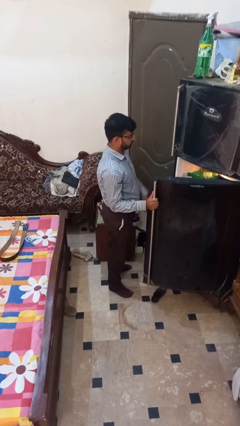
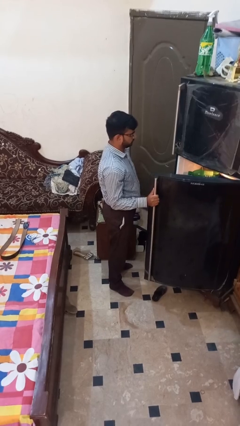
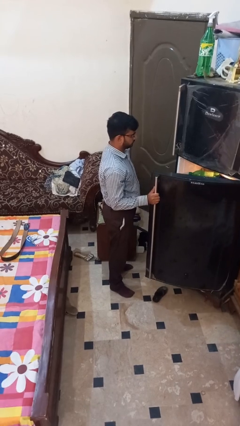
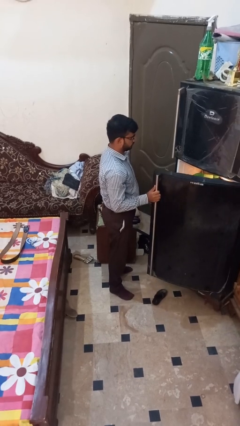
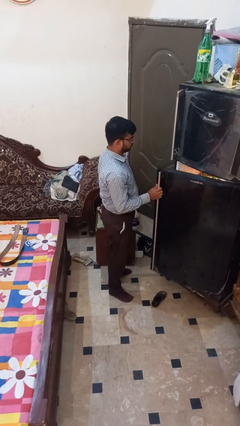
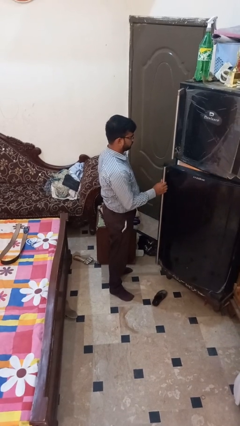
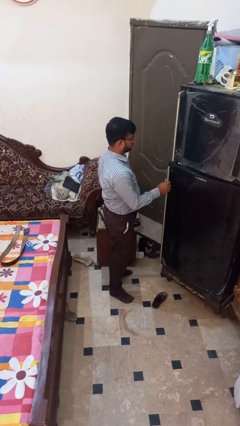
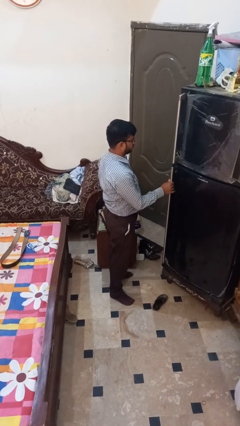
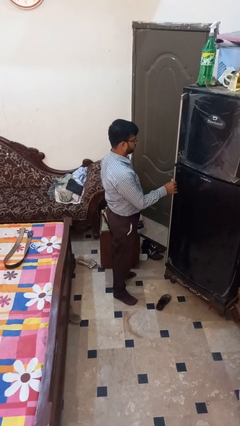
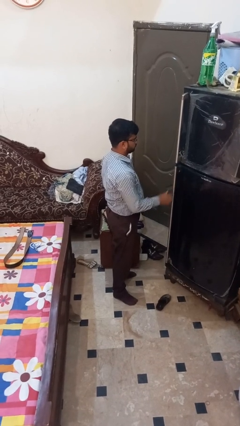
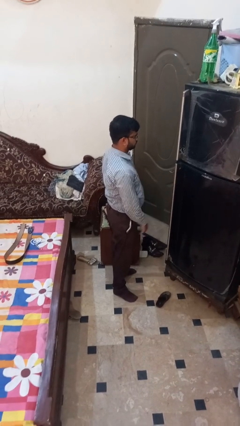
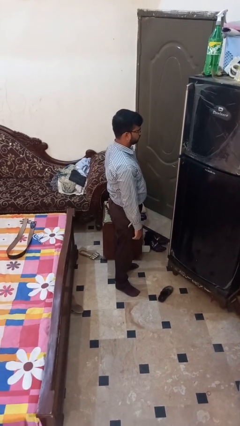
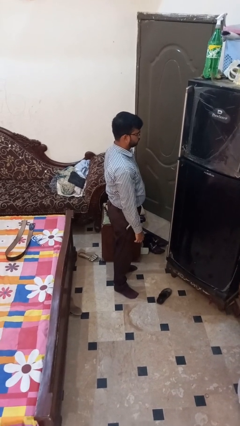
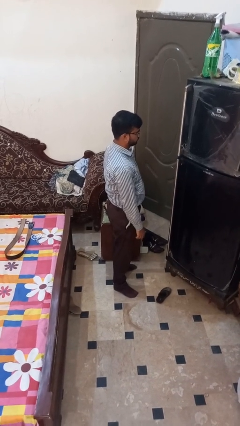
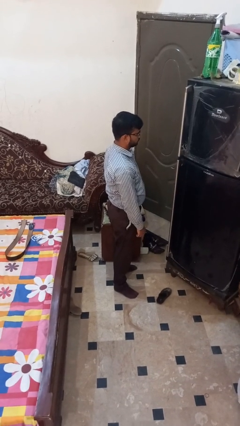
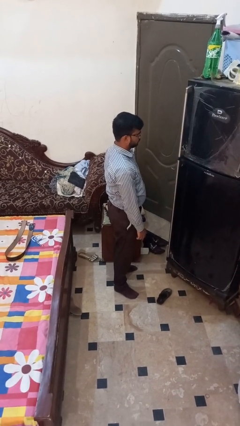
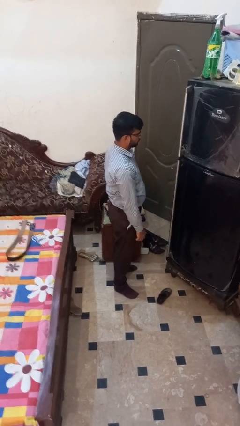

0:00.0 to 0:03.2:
person closes refrigerator

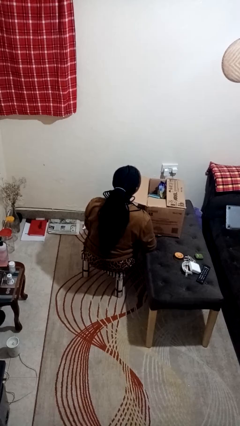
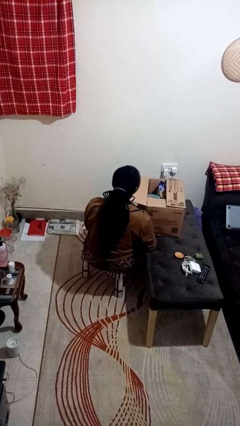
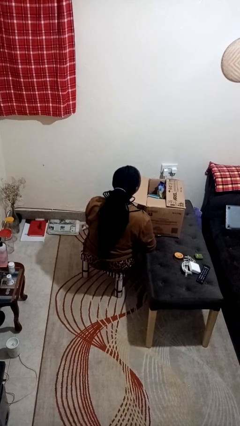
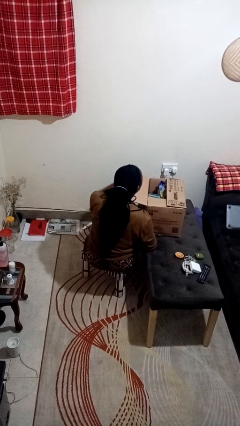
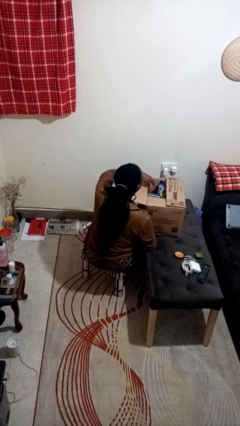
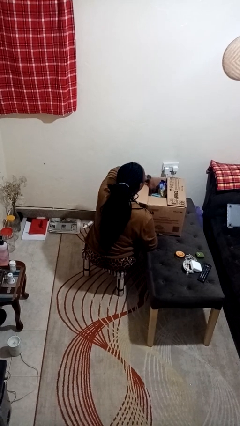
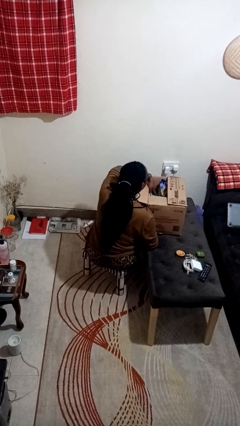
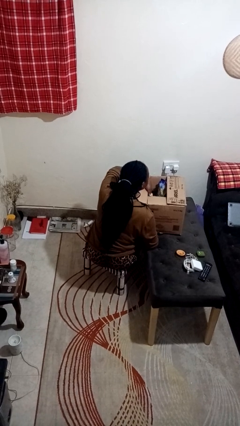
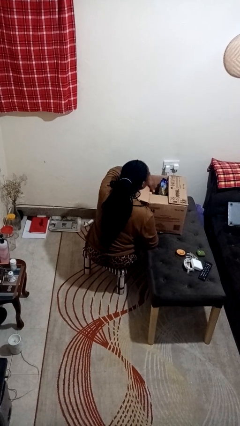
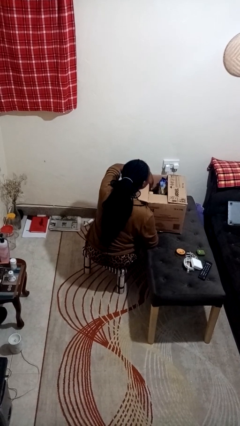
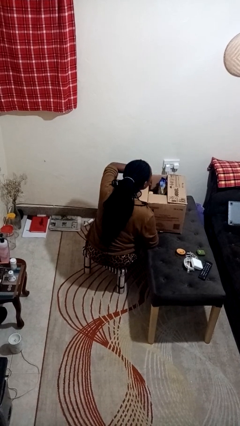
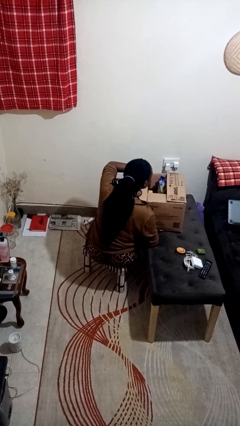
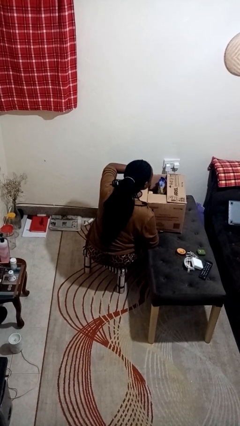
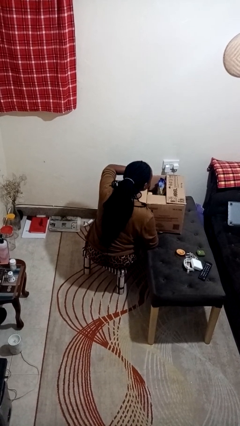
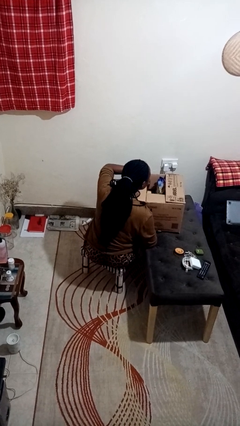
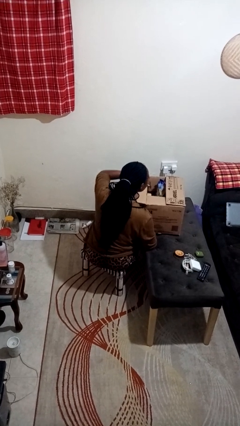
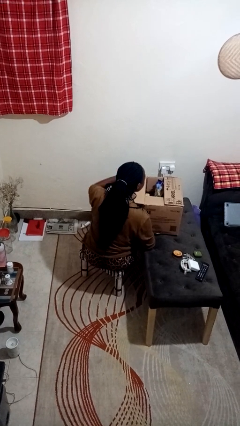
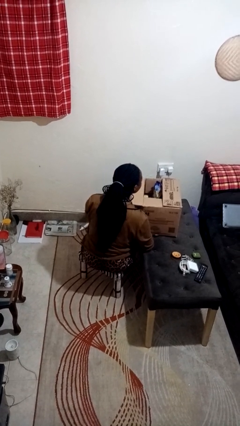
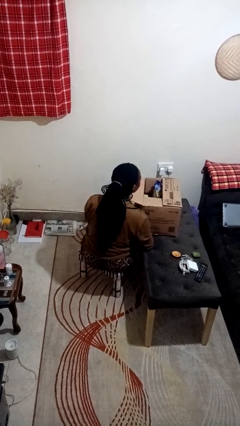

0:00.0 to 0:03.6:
person searches in box

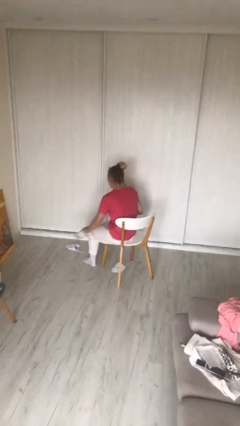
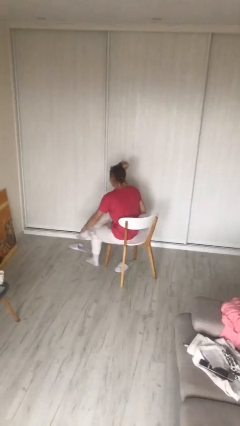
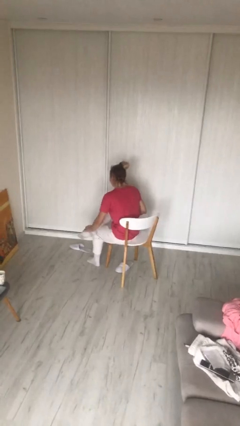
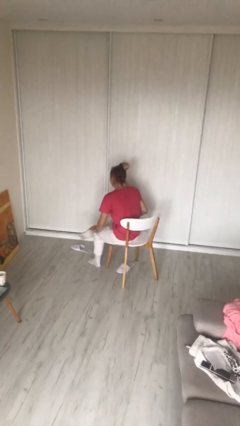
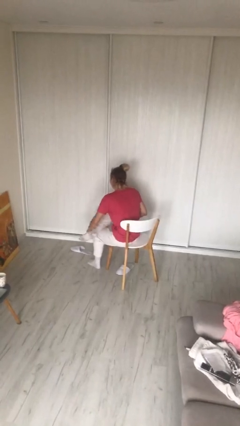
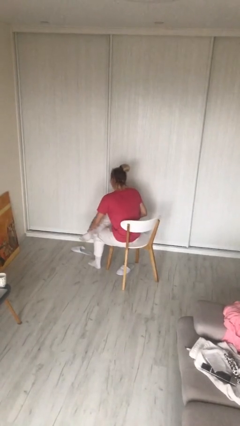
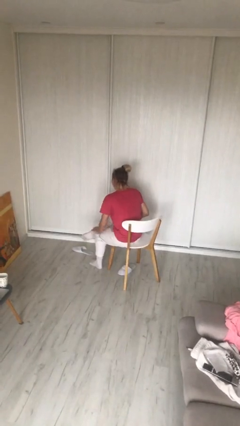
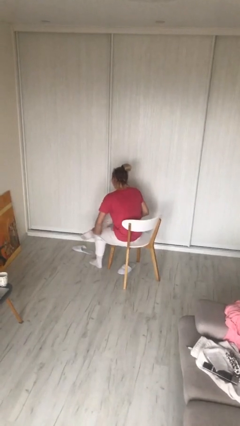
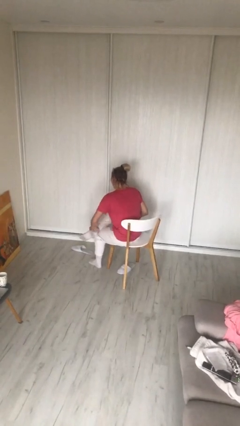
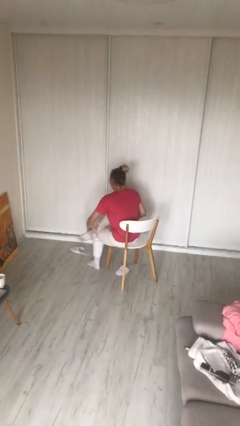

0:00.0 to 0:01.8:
person rubs foot

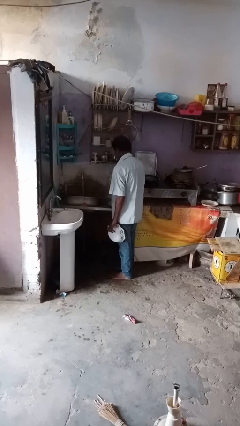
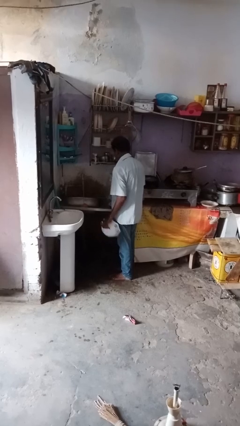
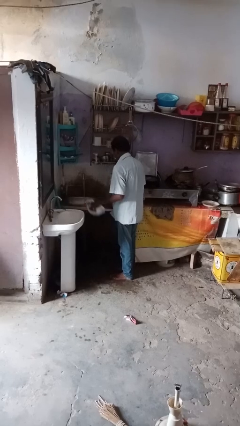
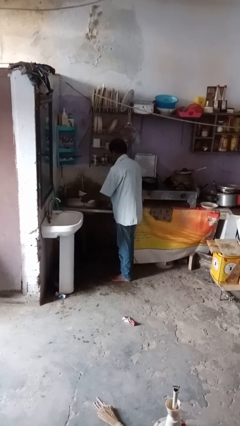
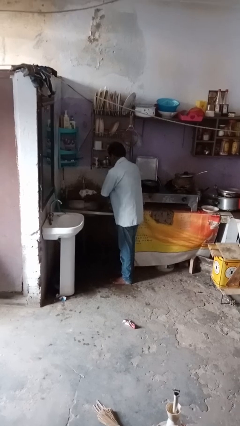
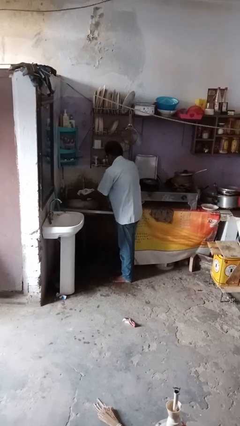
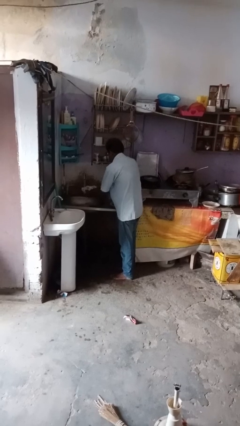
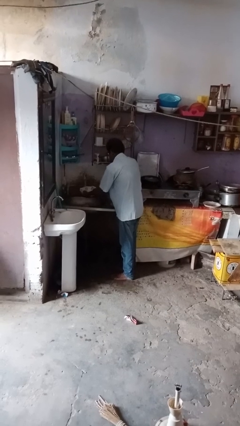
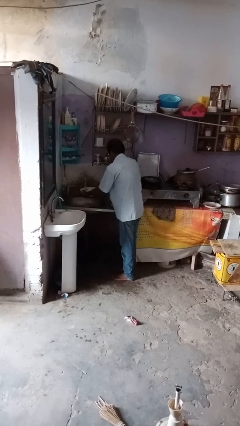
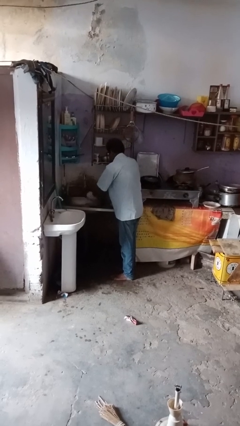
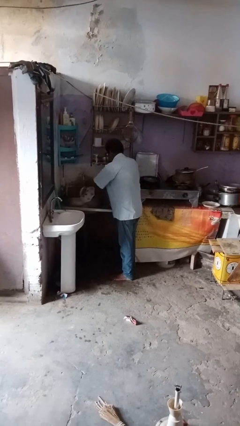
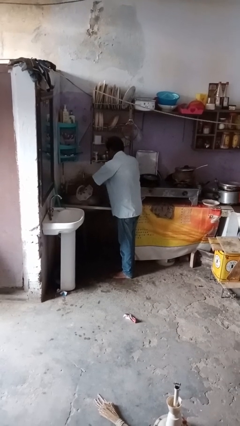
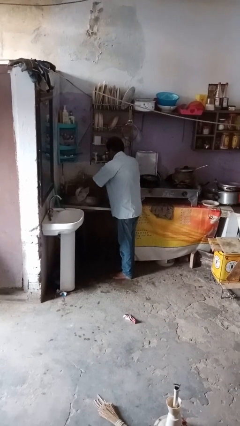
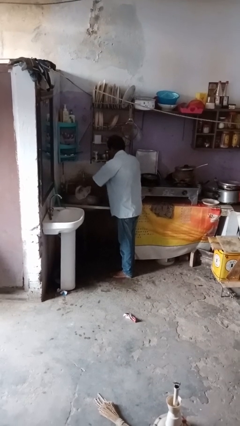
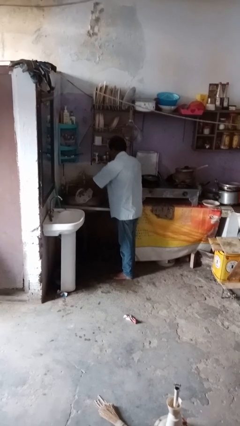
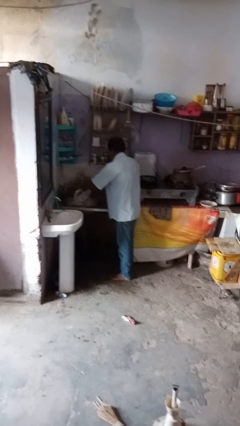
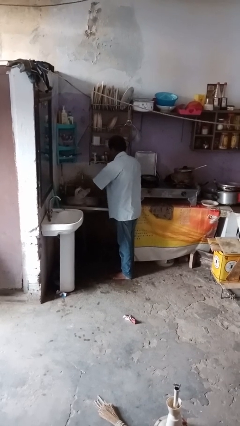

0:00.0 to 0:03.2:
person washes dish

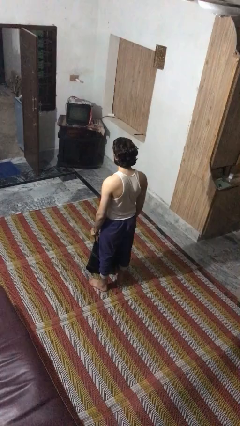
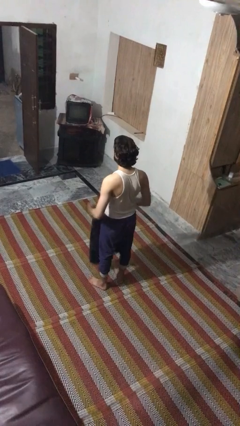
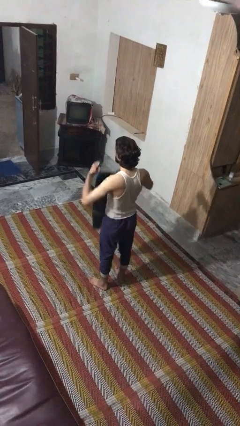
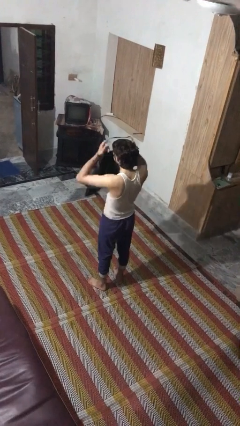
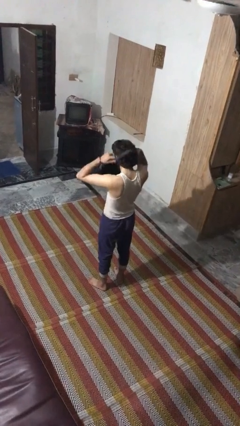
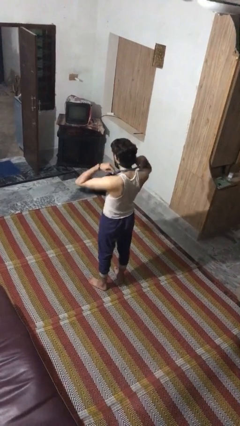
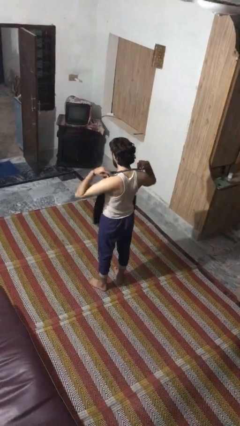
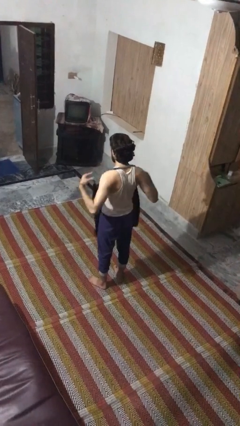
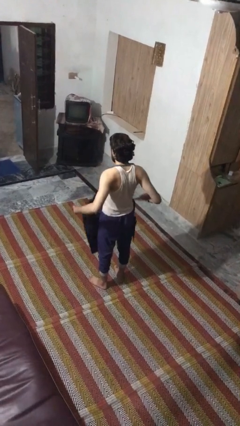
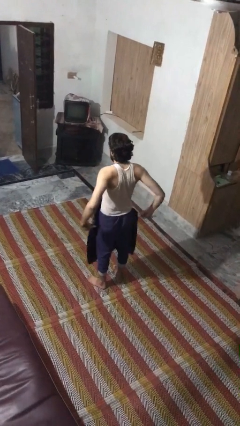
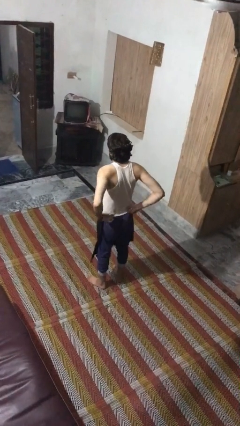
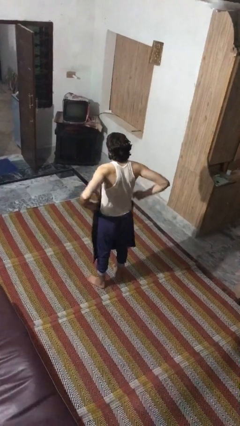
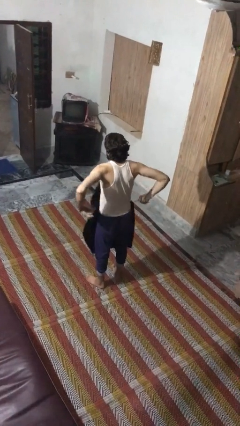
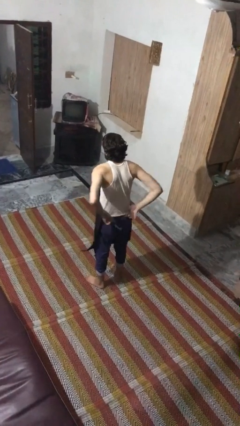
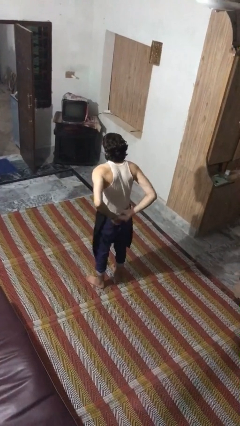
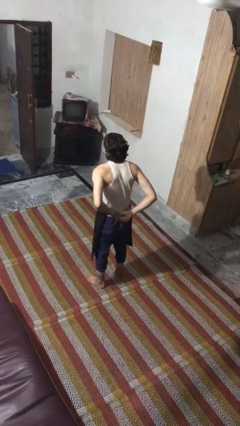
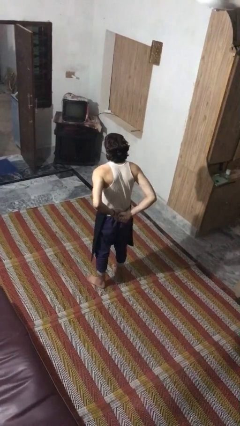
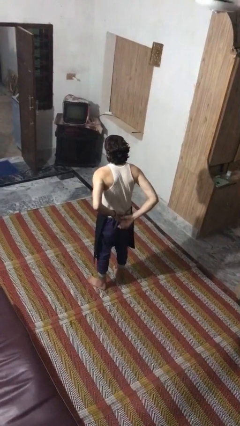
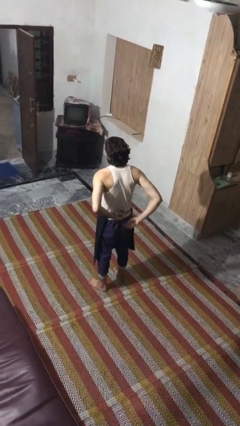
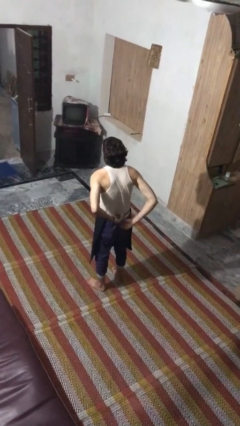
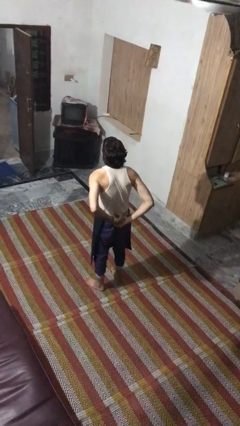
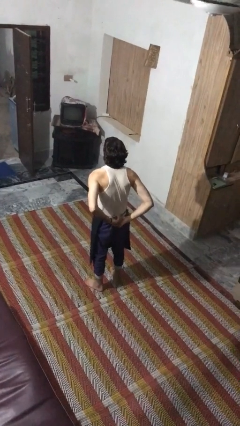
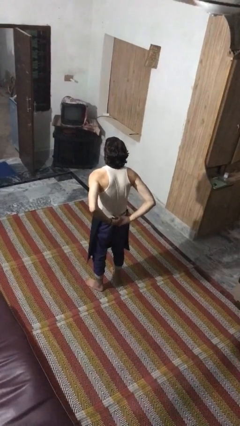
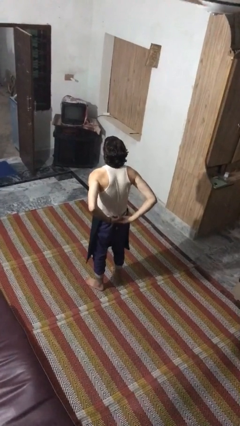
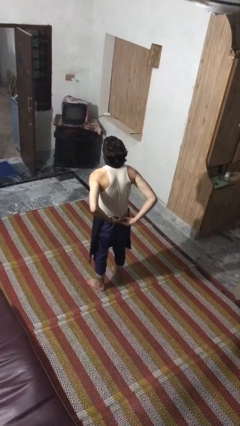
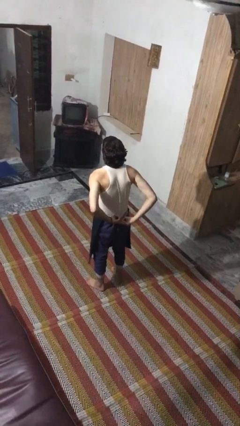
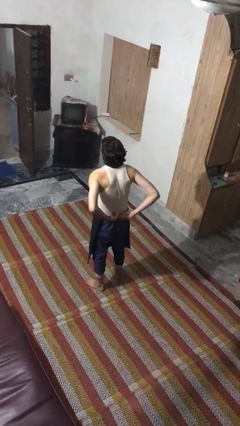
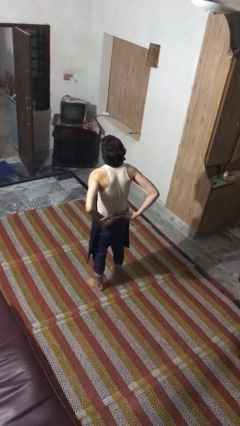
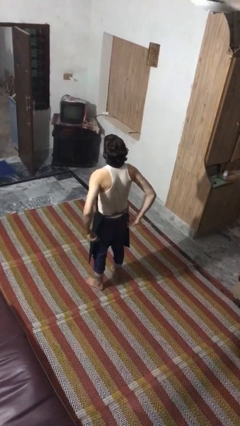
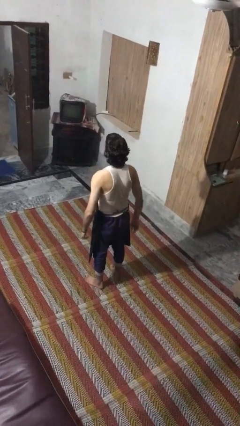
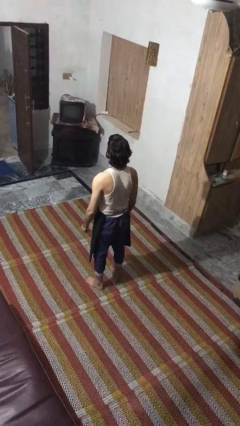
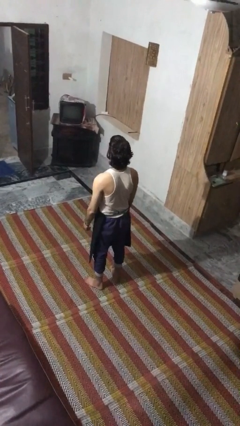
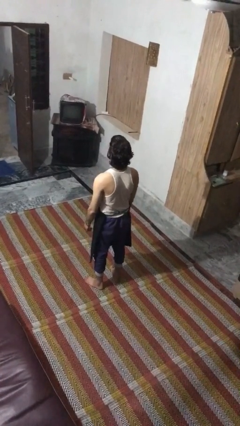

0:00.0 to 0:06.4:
person puts on apron
